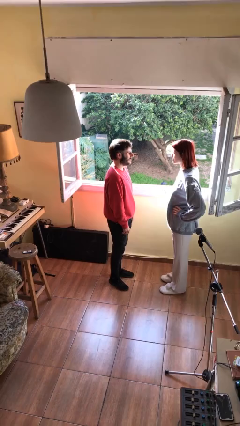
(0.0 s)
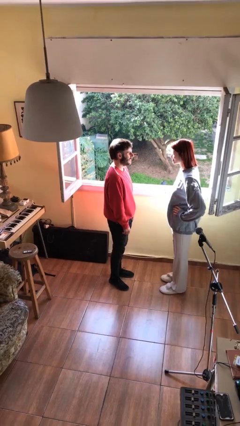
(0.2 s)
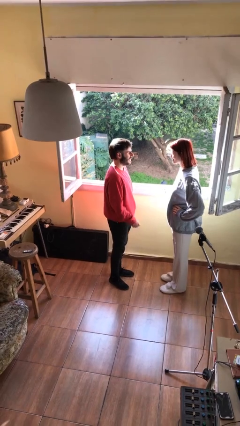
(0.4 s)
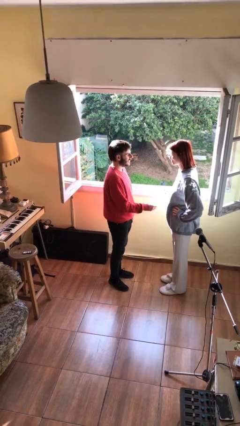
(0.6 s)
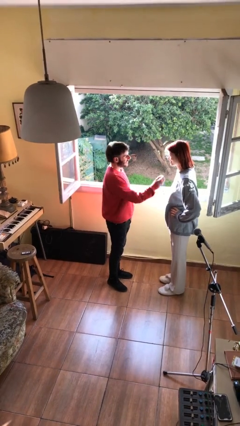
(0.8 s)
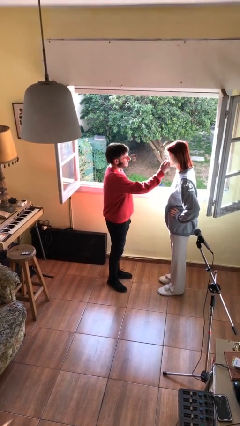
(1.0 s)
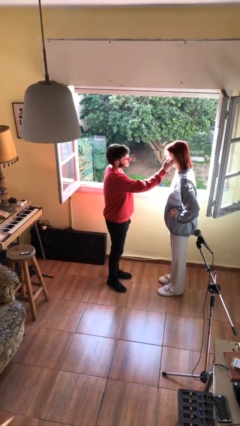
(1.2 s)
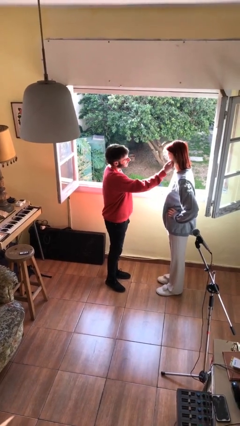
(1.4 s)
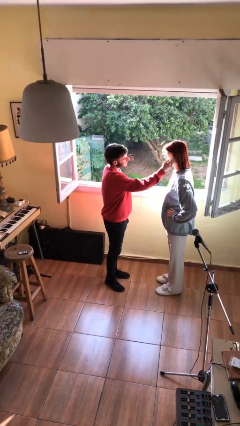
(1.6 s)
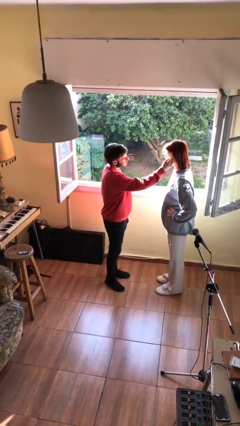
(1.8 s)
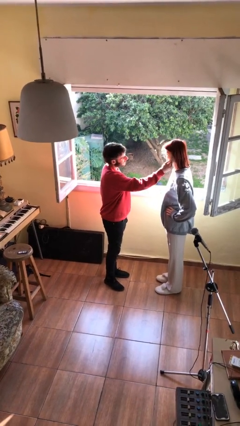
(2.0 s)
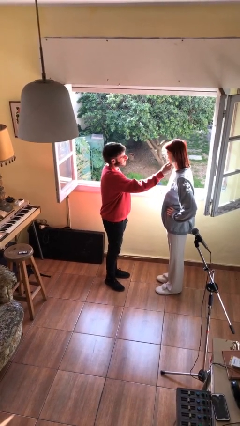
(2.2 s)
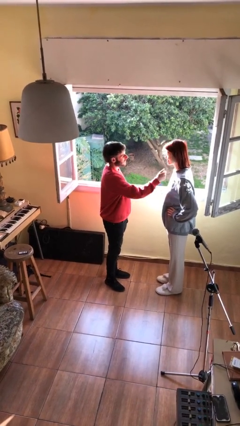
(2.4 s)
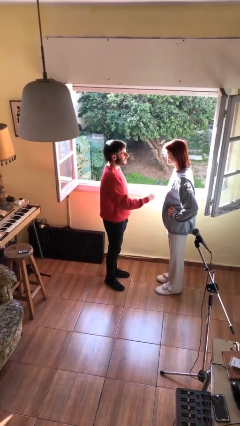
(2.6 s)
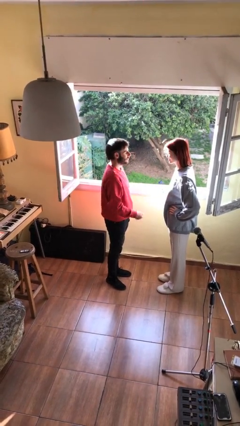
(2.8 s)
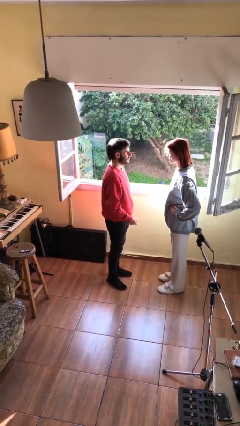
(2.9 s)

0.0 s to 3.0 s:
person touches face of person

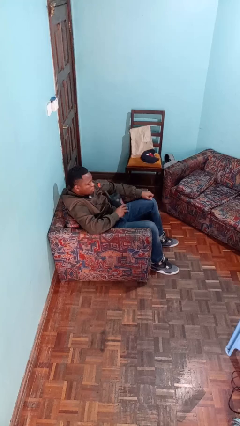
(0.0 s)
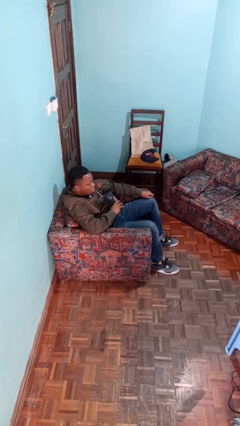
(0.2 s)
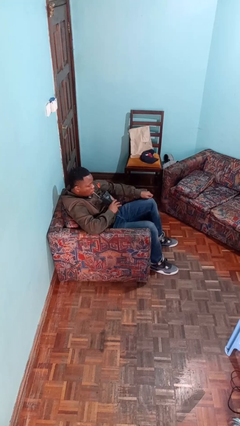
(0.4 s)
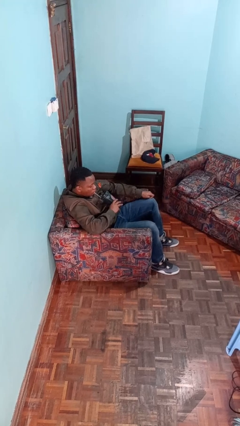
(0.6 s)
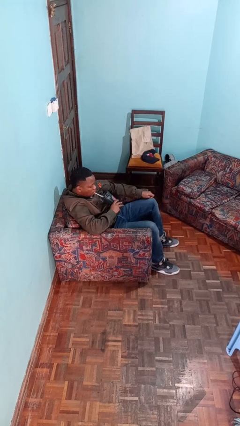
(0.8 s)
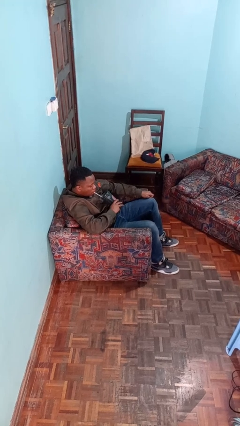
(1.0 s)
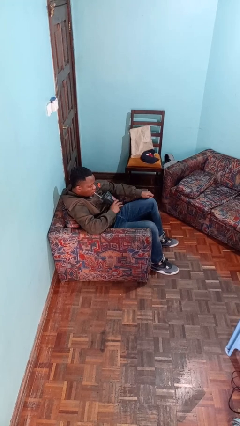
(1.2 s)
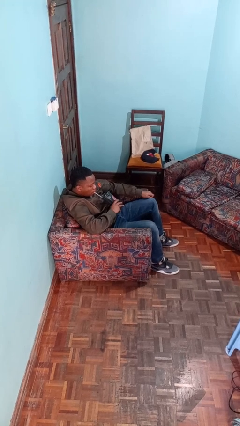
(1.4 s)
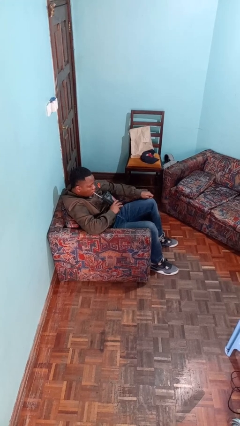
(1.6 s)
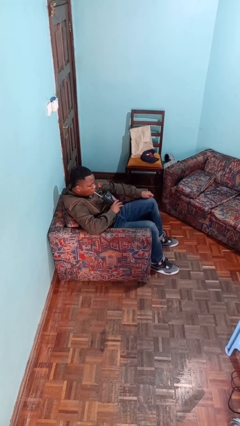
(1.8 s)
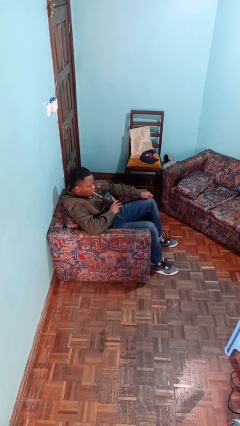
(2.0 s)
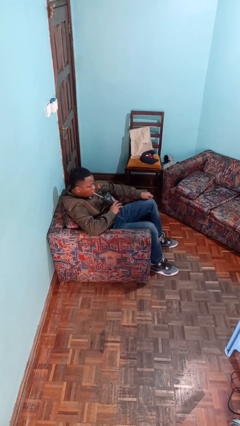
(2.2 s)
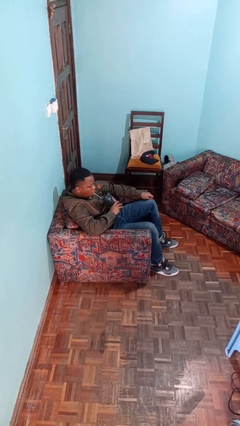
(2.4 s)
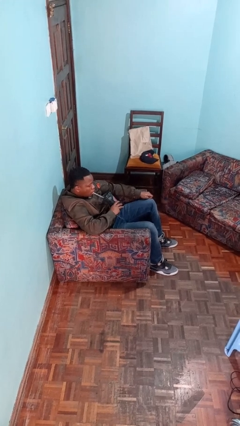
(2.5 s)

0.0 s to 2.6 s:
person drinks from straw

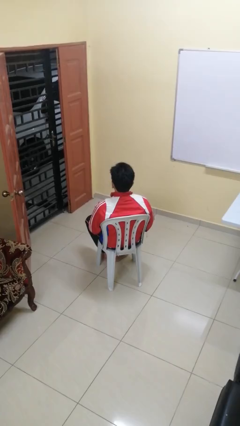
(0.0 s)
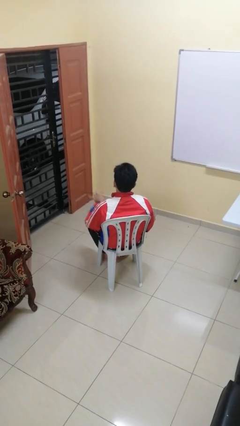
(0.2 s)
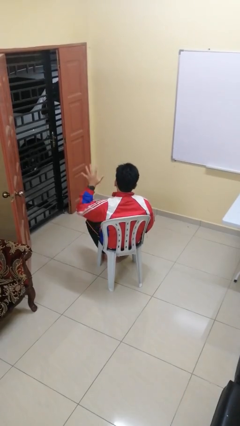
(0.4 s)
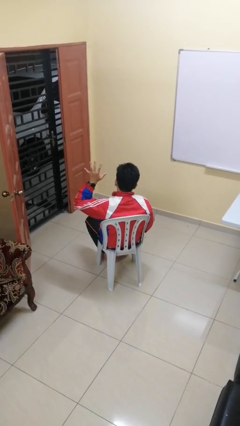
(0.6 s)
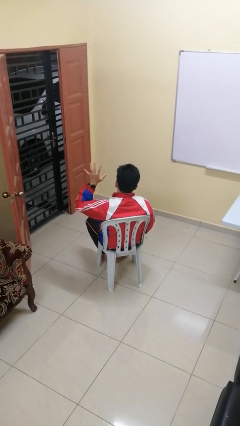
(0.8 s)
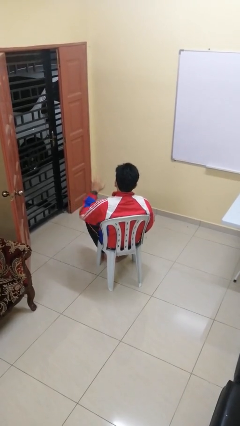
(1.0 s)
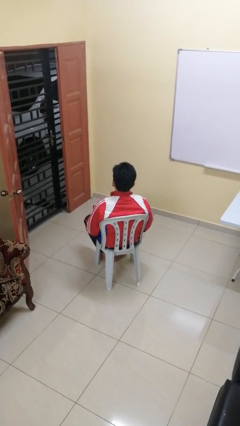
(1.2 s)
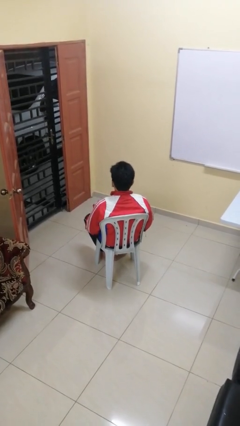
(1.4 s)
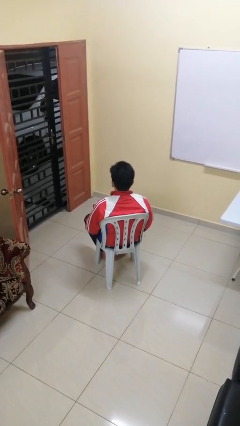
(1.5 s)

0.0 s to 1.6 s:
person gestures number five

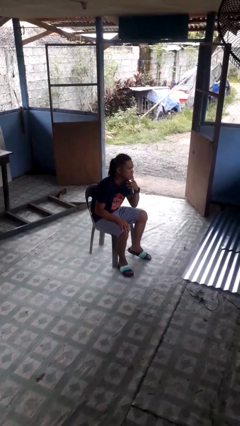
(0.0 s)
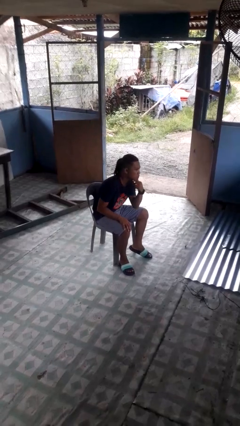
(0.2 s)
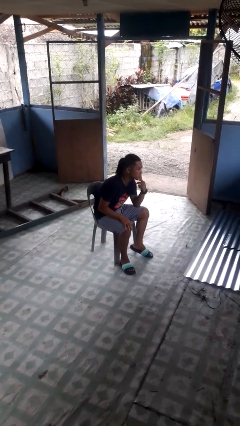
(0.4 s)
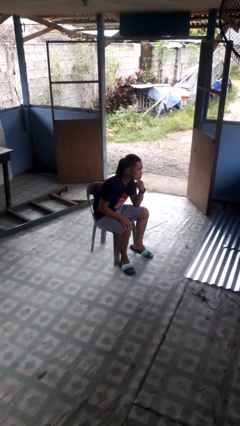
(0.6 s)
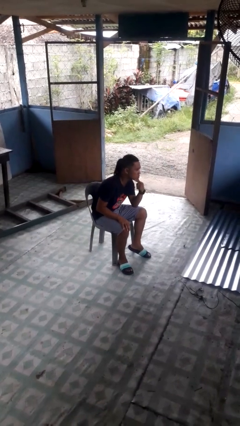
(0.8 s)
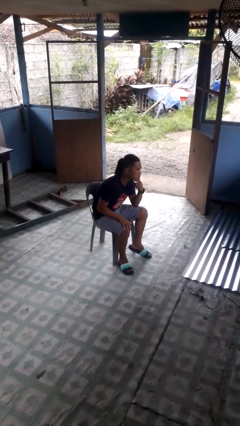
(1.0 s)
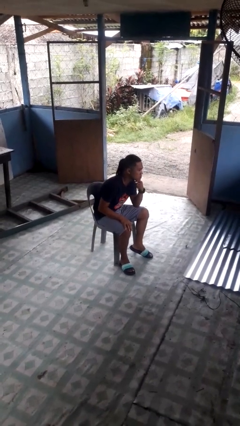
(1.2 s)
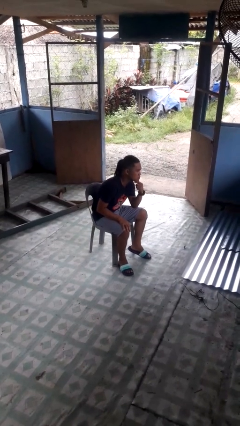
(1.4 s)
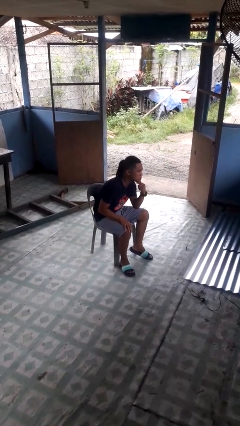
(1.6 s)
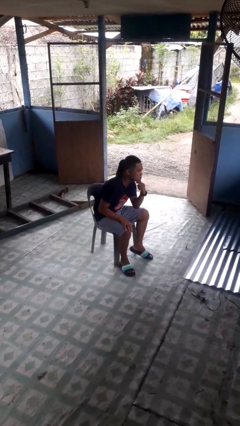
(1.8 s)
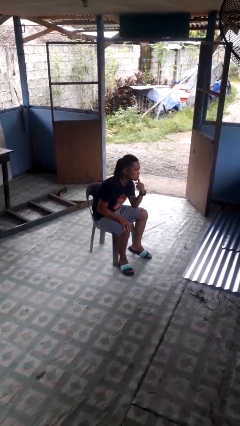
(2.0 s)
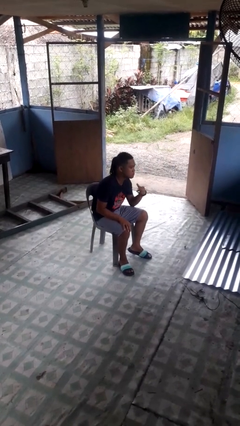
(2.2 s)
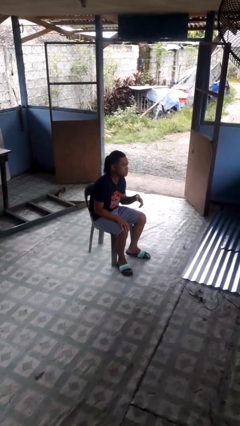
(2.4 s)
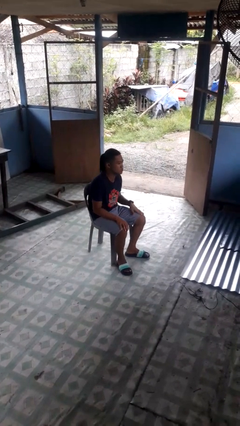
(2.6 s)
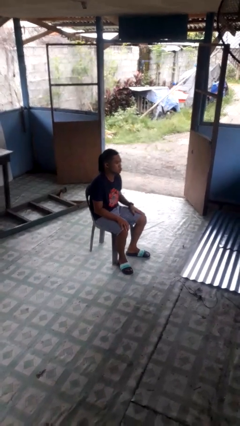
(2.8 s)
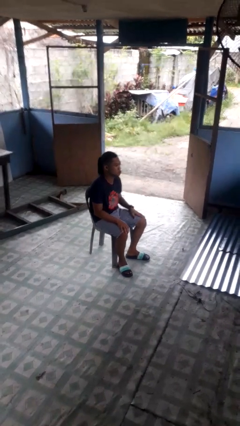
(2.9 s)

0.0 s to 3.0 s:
person strokes chin

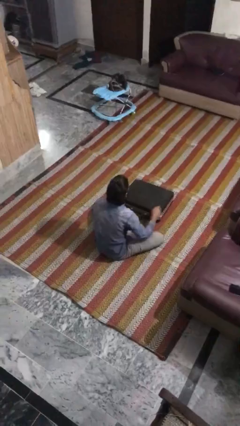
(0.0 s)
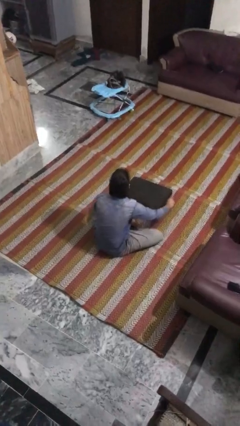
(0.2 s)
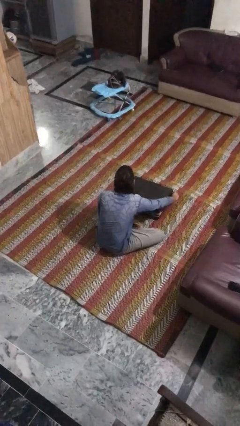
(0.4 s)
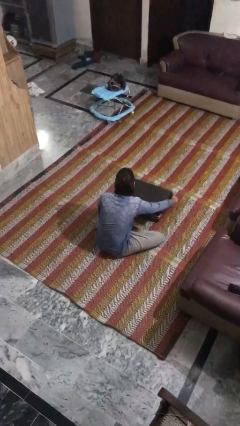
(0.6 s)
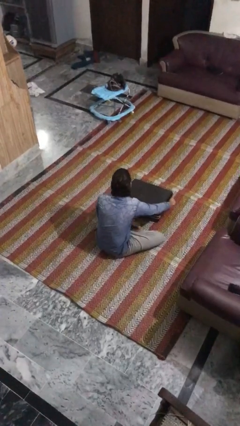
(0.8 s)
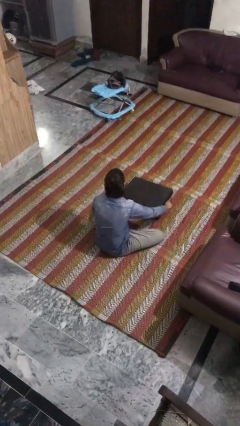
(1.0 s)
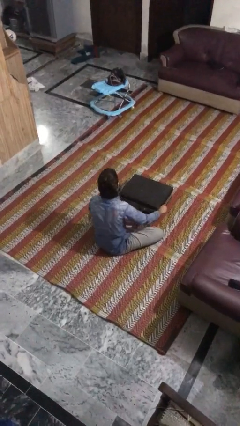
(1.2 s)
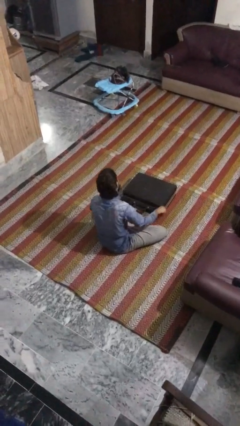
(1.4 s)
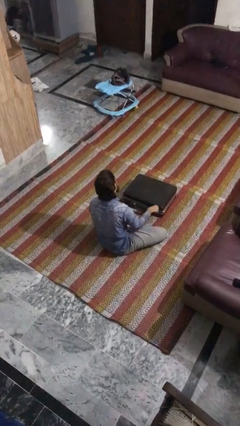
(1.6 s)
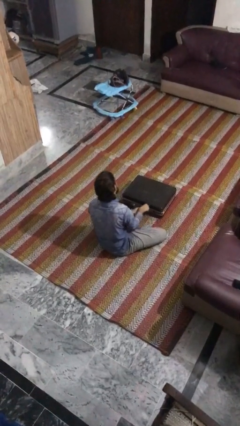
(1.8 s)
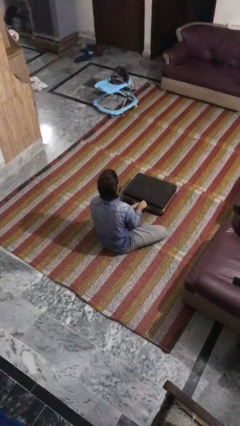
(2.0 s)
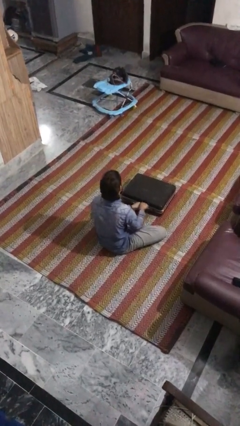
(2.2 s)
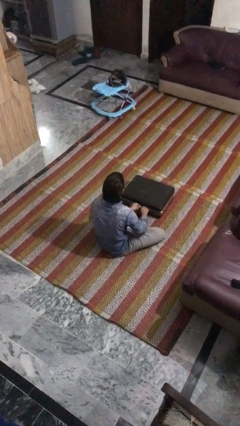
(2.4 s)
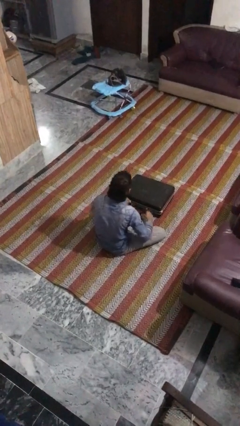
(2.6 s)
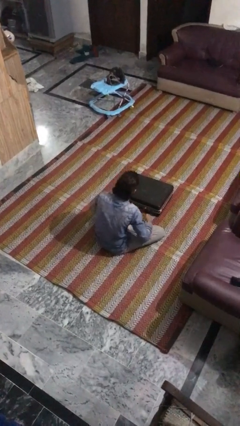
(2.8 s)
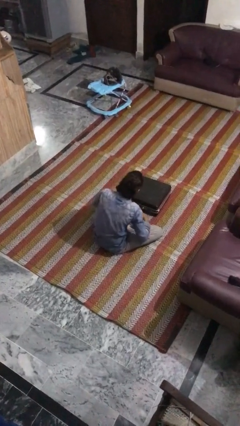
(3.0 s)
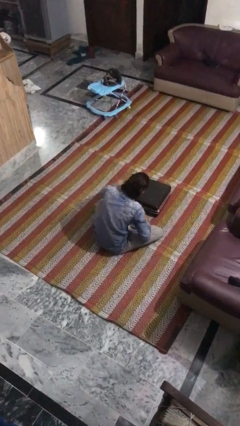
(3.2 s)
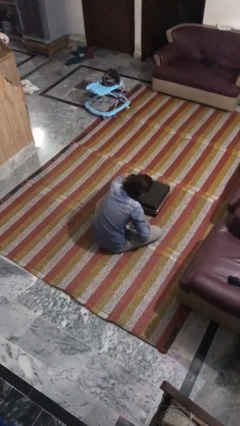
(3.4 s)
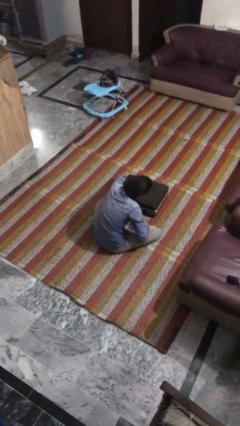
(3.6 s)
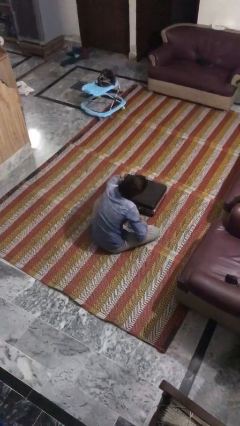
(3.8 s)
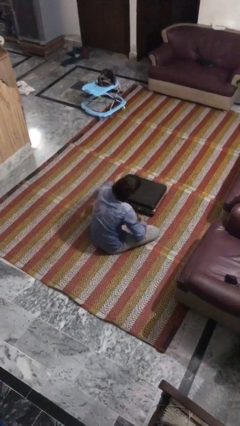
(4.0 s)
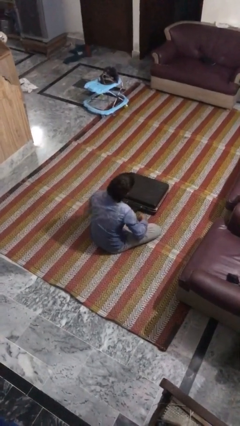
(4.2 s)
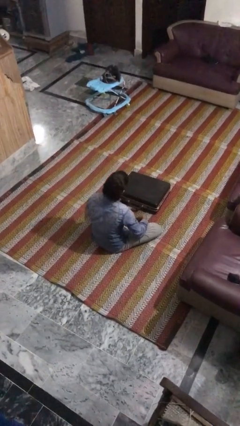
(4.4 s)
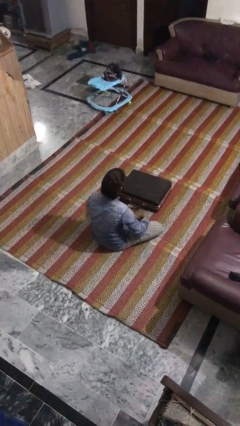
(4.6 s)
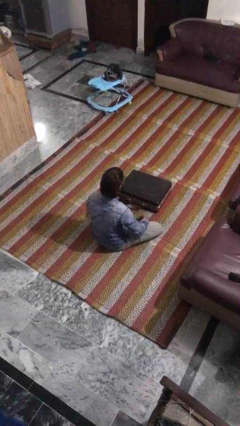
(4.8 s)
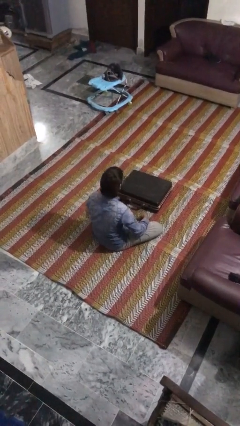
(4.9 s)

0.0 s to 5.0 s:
person opens suitcase

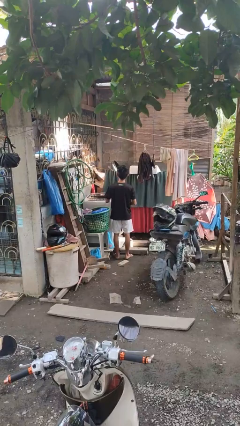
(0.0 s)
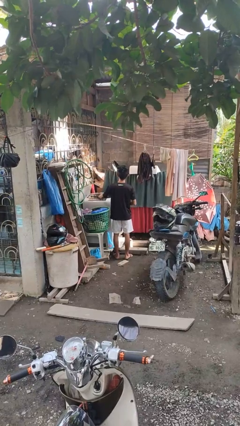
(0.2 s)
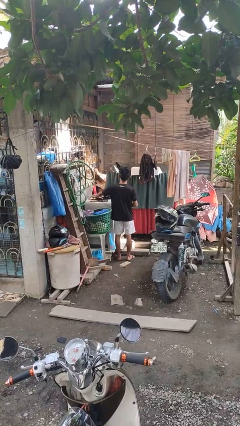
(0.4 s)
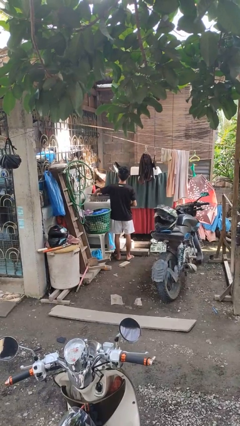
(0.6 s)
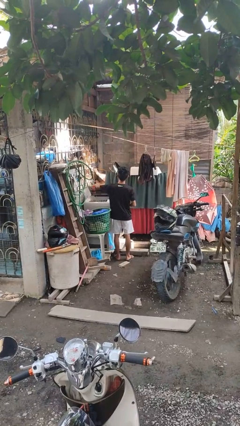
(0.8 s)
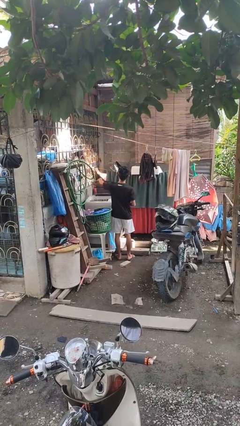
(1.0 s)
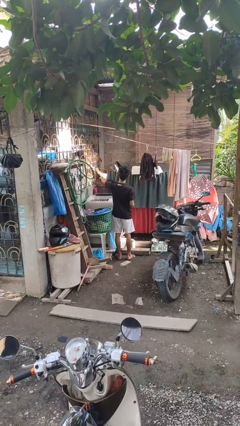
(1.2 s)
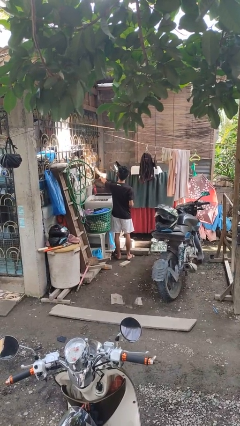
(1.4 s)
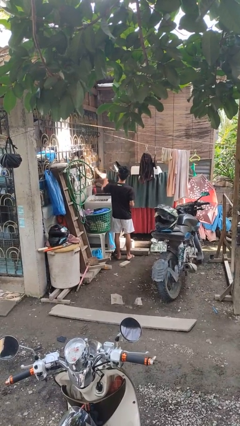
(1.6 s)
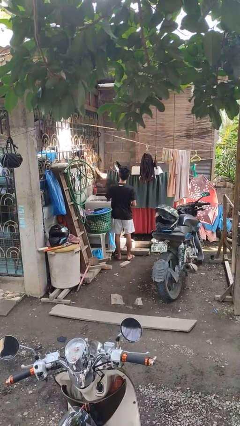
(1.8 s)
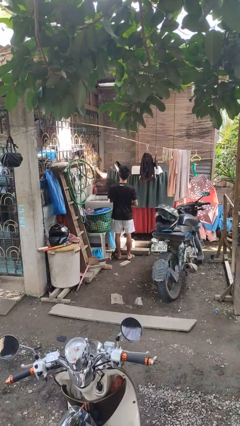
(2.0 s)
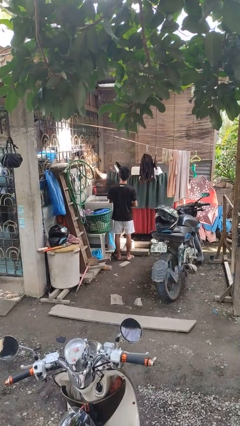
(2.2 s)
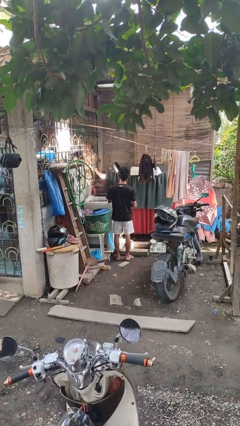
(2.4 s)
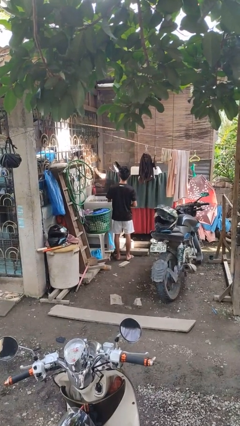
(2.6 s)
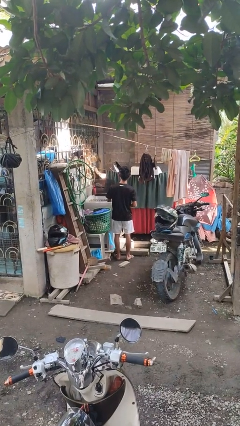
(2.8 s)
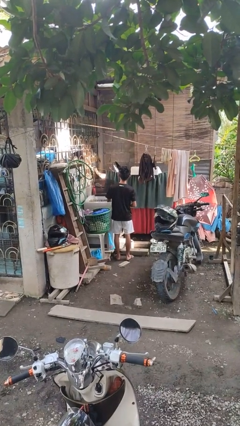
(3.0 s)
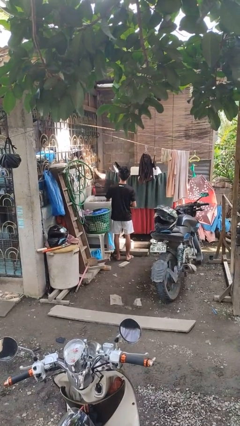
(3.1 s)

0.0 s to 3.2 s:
person opens clothes washer
